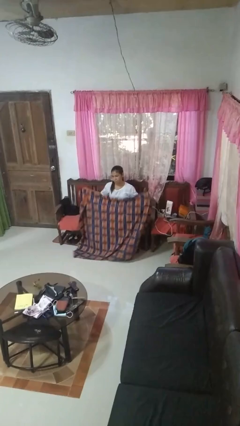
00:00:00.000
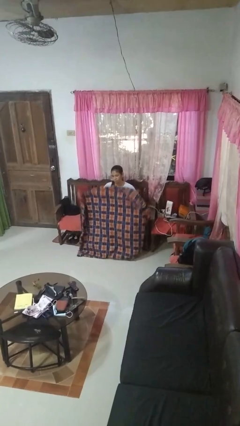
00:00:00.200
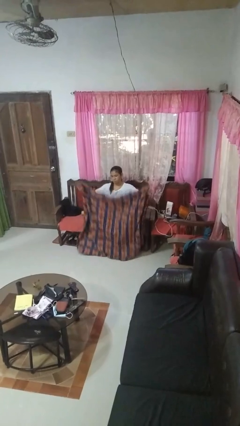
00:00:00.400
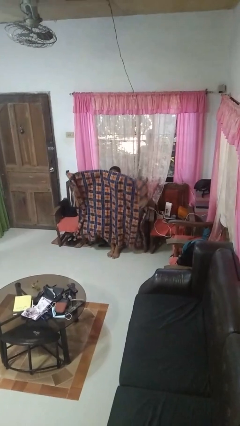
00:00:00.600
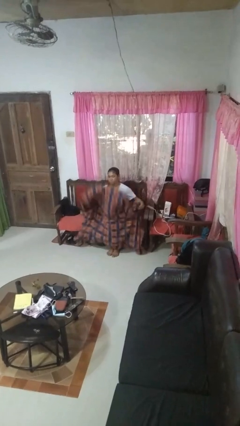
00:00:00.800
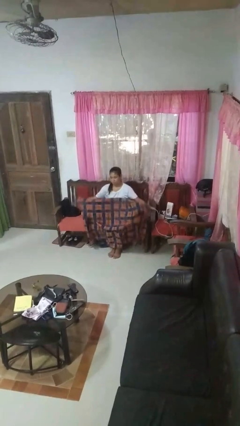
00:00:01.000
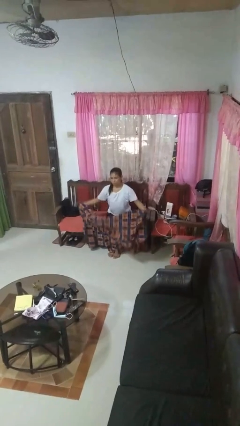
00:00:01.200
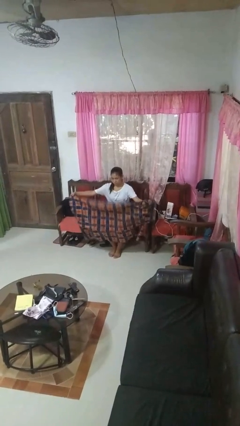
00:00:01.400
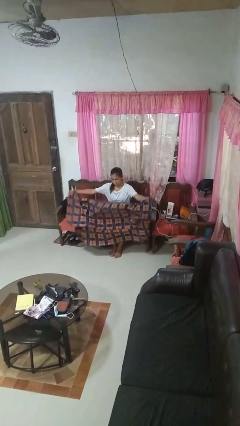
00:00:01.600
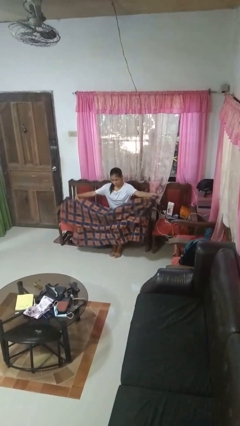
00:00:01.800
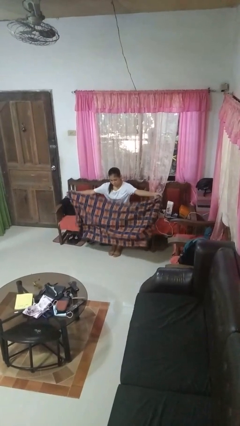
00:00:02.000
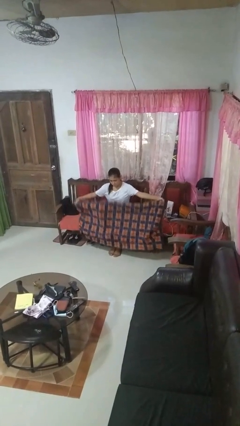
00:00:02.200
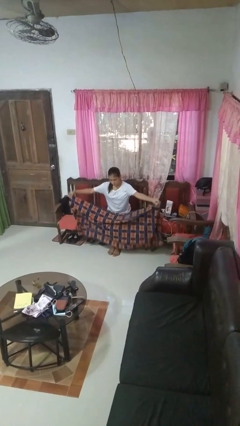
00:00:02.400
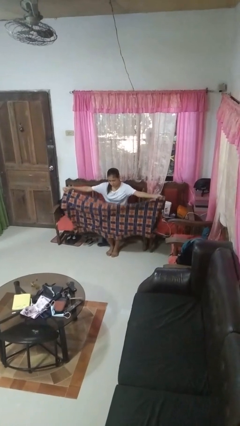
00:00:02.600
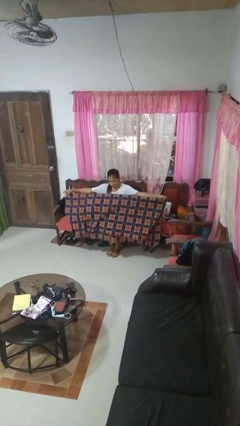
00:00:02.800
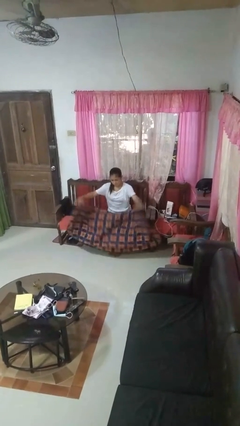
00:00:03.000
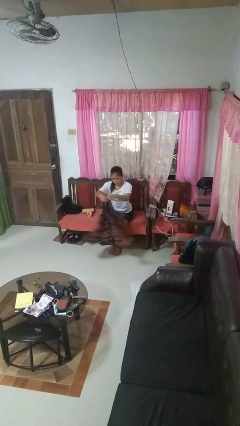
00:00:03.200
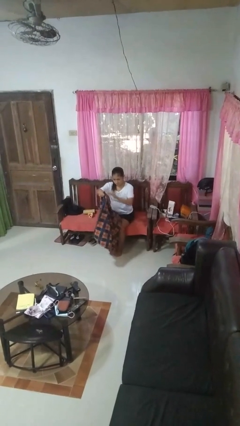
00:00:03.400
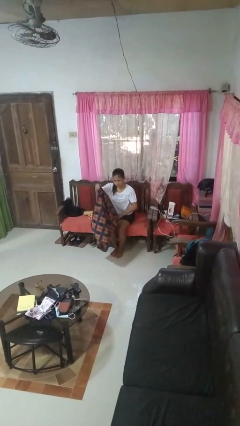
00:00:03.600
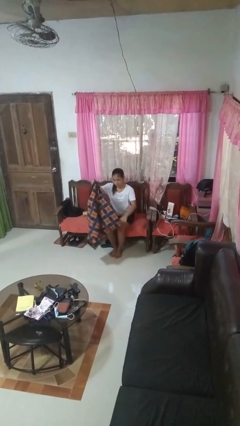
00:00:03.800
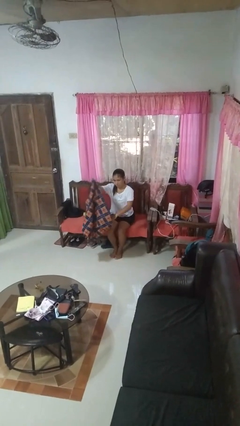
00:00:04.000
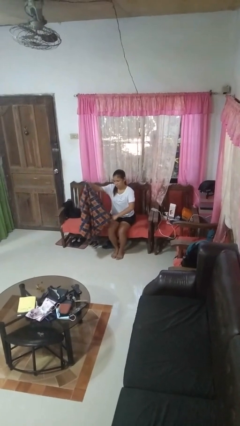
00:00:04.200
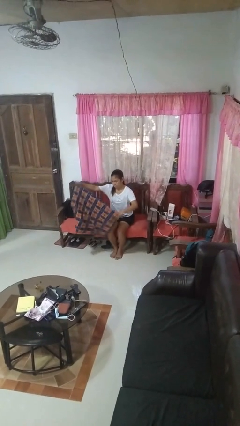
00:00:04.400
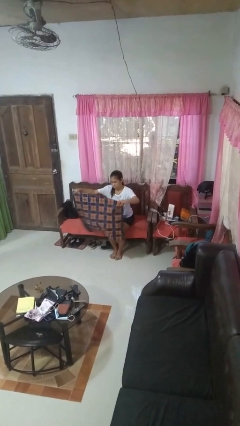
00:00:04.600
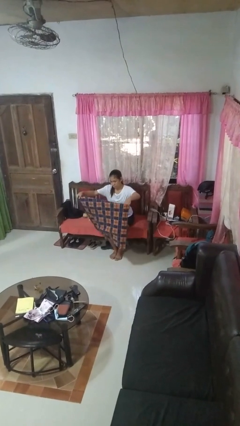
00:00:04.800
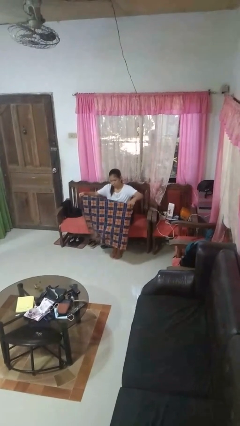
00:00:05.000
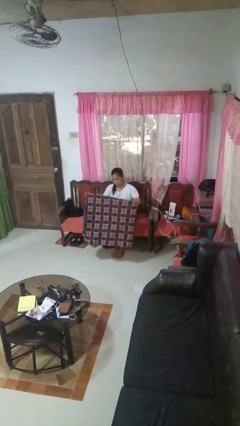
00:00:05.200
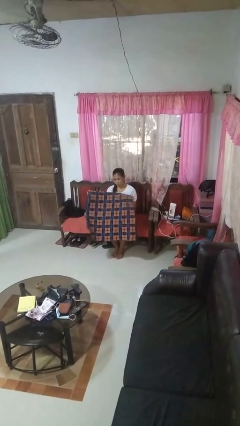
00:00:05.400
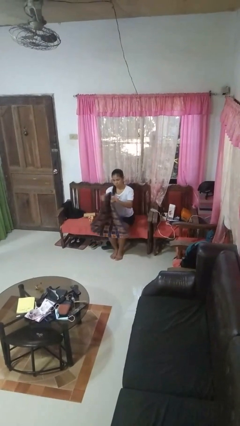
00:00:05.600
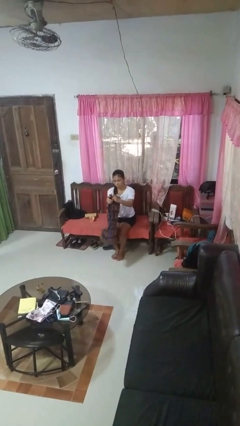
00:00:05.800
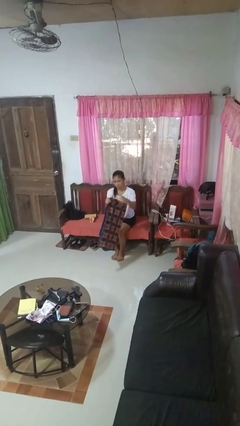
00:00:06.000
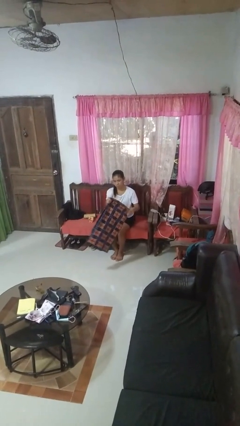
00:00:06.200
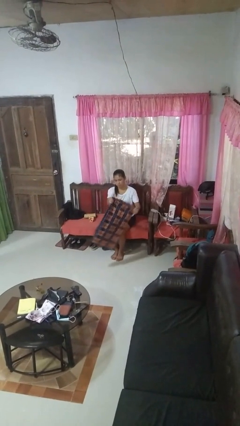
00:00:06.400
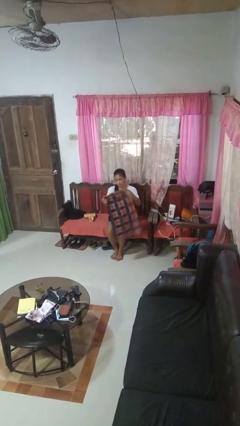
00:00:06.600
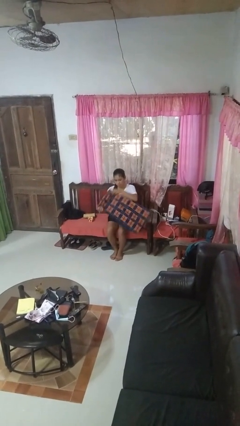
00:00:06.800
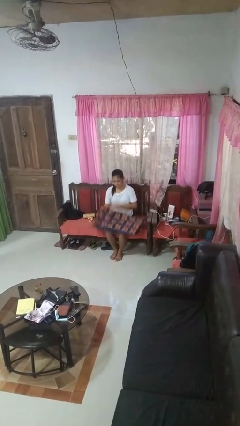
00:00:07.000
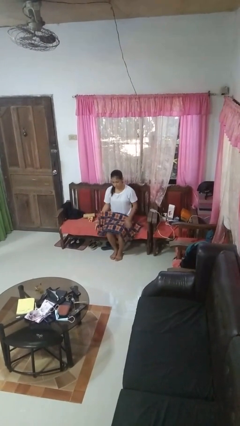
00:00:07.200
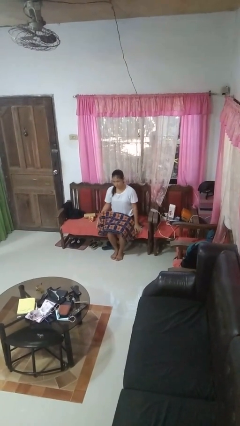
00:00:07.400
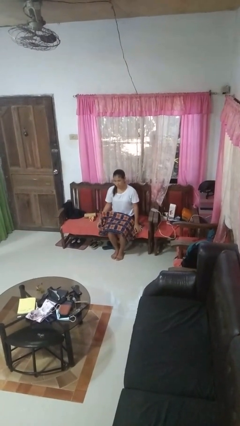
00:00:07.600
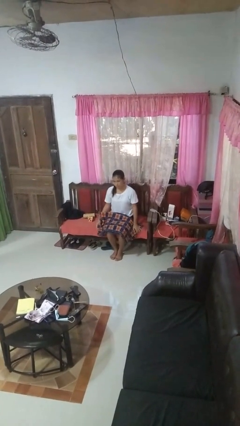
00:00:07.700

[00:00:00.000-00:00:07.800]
person folds blanket

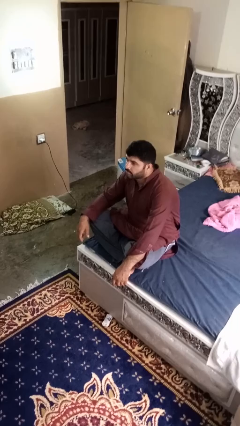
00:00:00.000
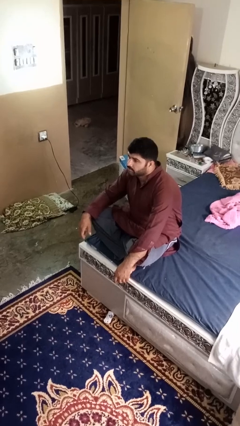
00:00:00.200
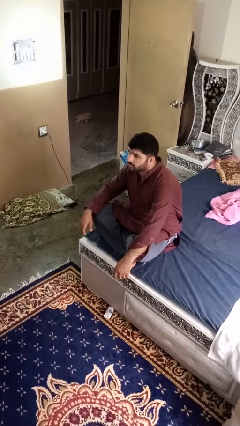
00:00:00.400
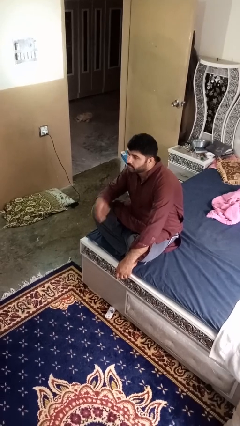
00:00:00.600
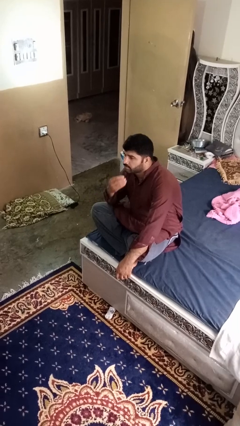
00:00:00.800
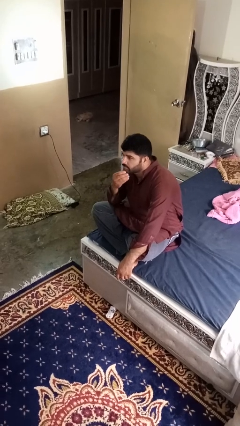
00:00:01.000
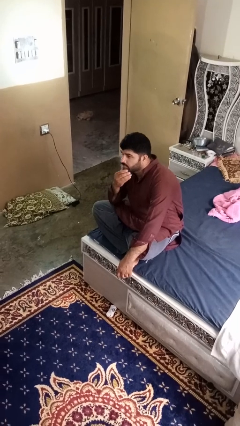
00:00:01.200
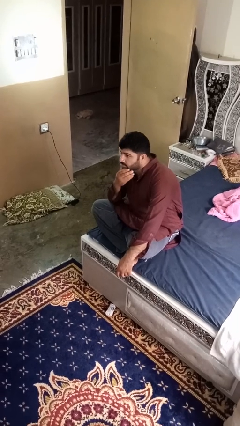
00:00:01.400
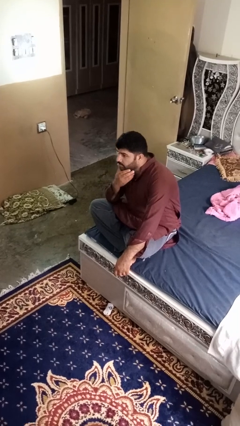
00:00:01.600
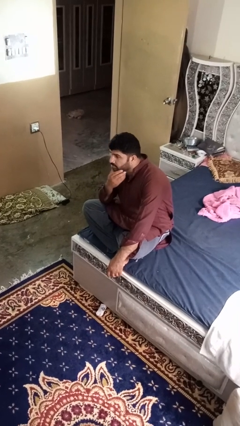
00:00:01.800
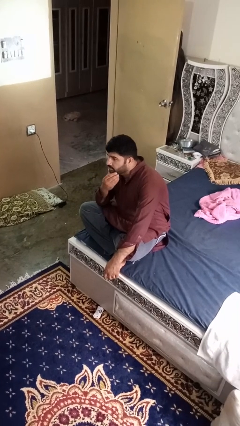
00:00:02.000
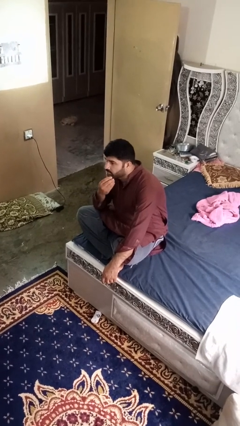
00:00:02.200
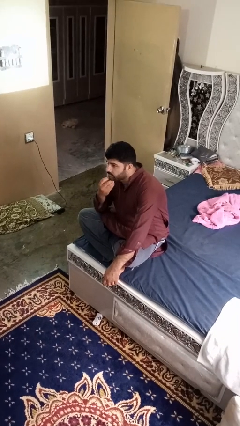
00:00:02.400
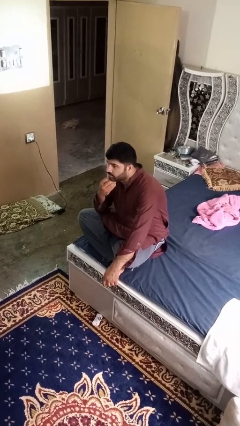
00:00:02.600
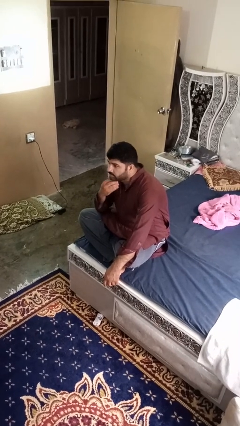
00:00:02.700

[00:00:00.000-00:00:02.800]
person strokes chin

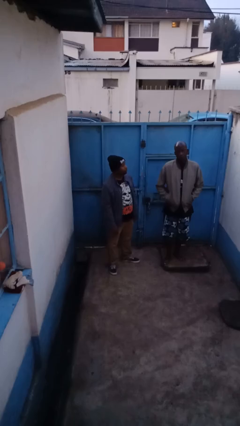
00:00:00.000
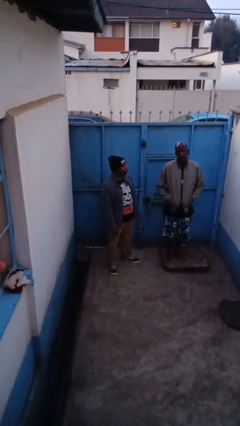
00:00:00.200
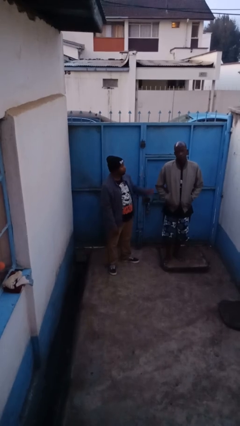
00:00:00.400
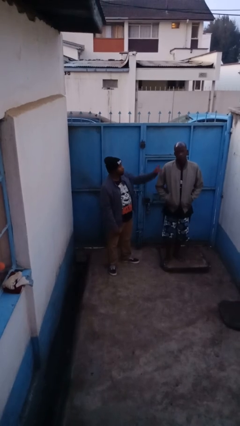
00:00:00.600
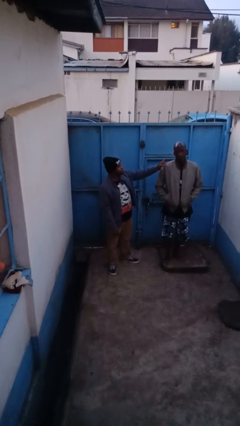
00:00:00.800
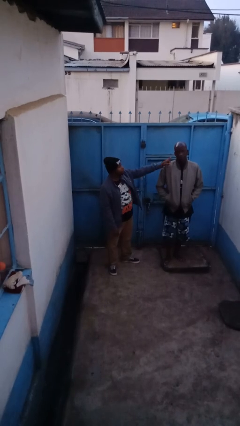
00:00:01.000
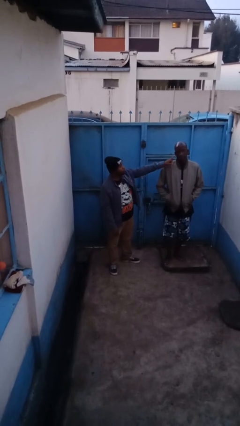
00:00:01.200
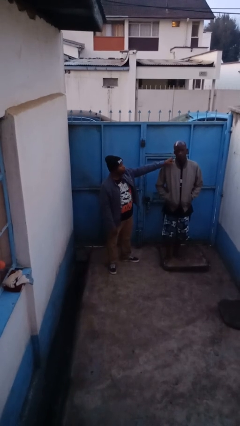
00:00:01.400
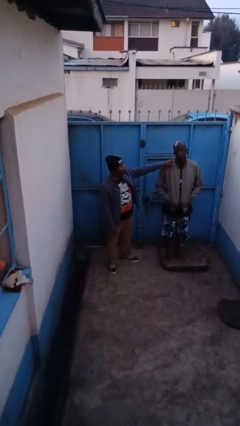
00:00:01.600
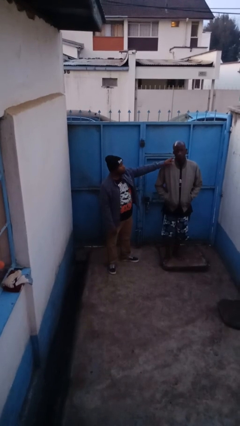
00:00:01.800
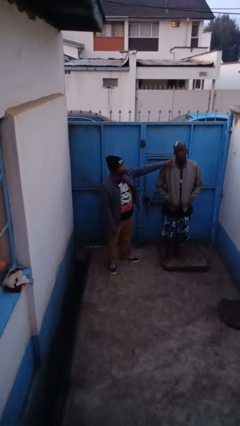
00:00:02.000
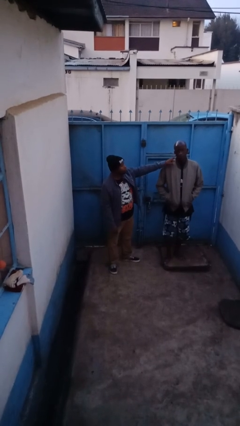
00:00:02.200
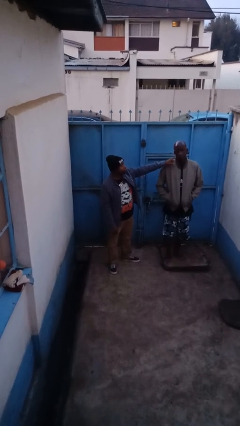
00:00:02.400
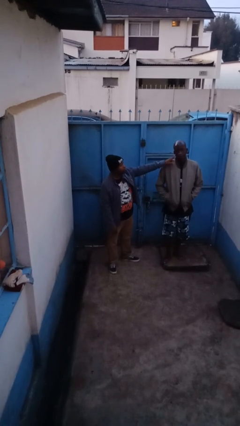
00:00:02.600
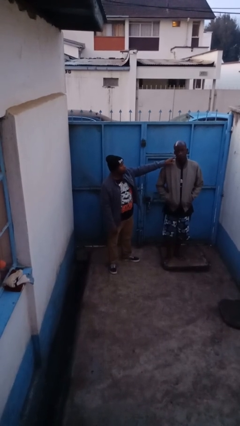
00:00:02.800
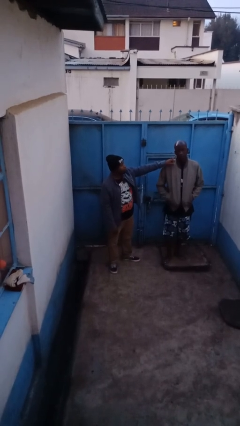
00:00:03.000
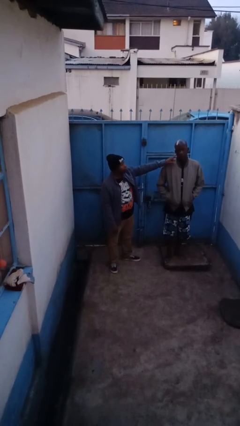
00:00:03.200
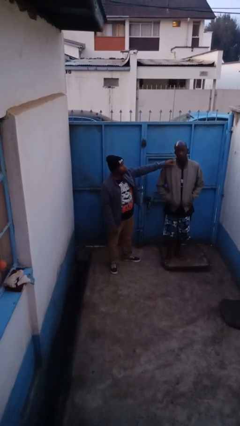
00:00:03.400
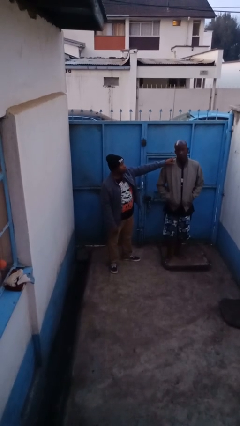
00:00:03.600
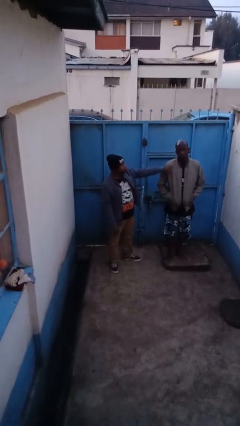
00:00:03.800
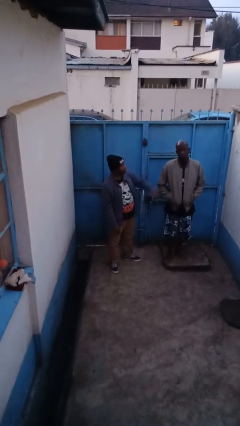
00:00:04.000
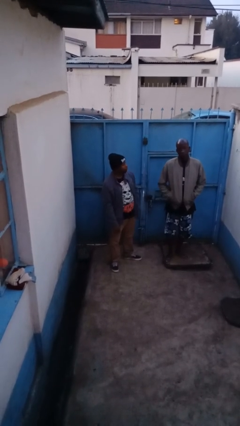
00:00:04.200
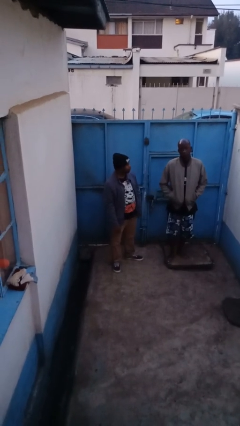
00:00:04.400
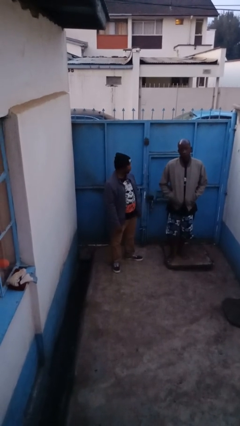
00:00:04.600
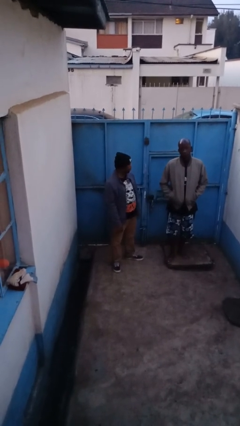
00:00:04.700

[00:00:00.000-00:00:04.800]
person touches face of person

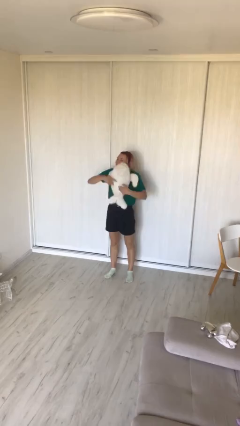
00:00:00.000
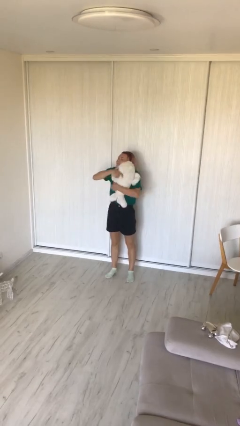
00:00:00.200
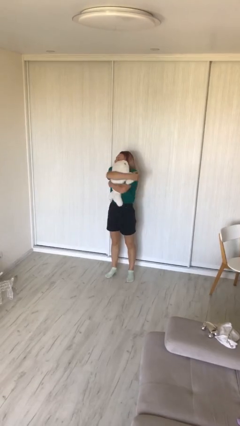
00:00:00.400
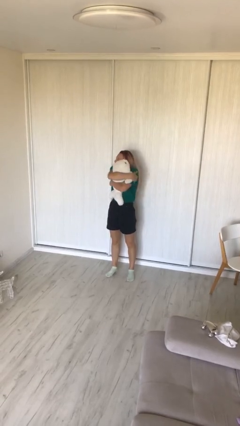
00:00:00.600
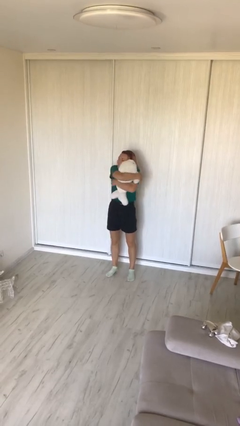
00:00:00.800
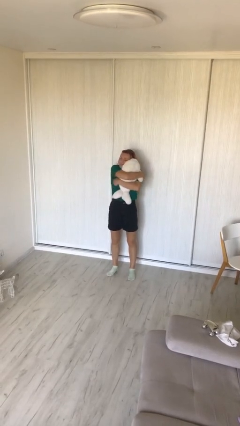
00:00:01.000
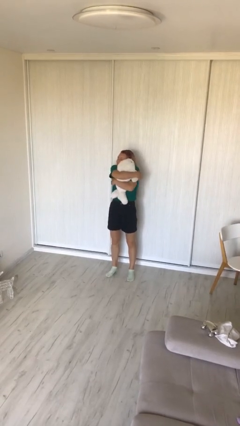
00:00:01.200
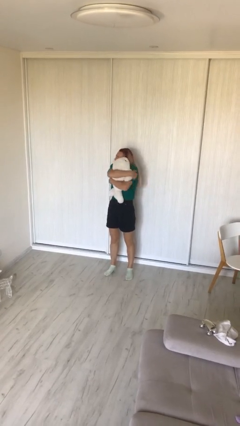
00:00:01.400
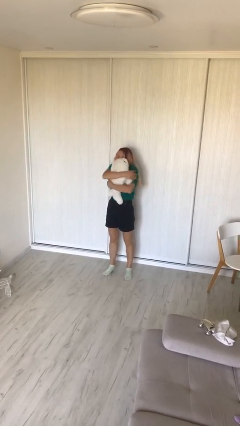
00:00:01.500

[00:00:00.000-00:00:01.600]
person hugs stuffed animal

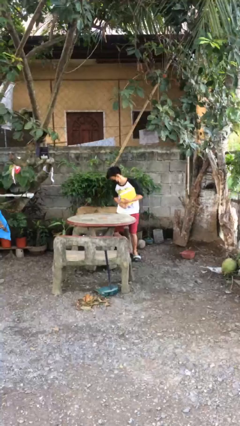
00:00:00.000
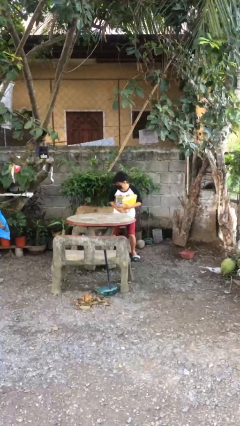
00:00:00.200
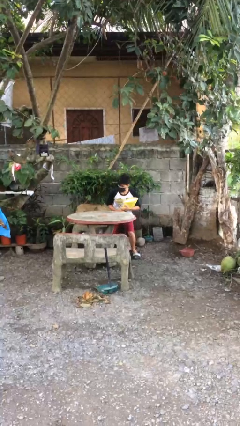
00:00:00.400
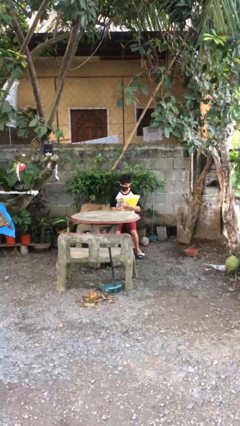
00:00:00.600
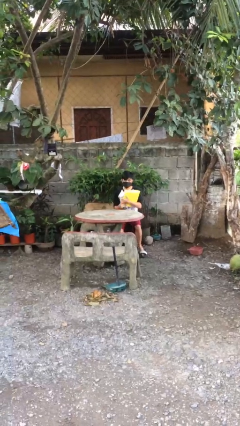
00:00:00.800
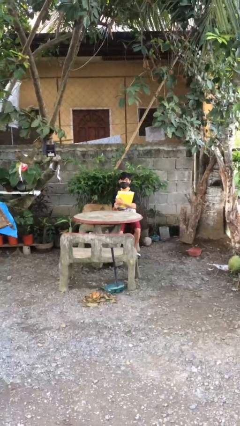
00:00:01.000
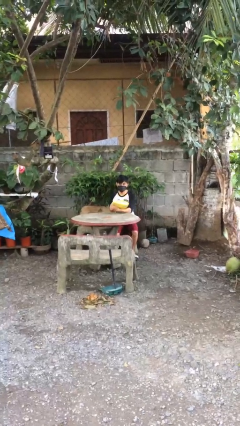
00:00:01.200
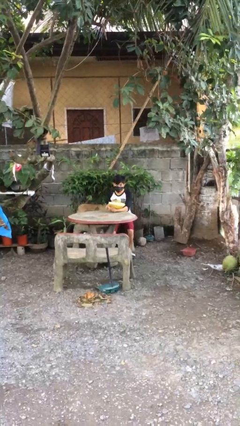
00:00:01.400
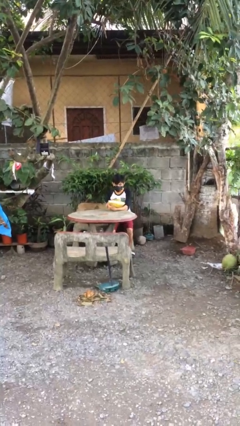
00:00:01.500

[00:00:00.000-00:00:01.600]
person sits down
